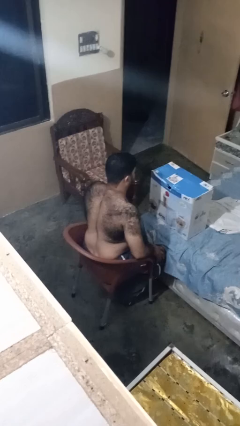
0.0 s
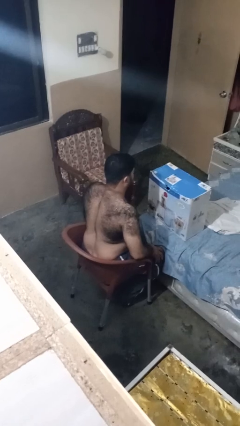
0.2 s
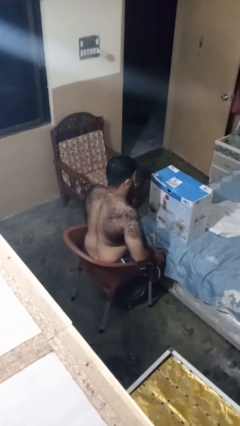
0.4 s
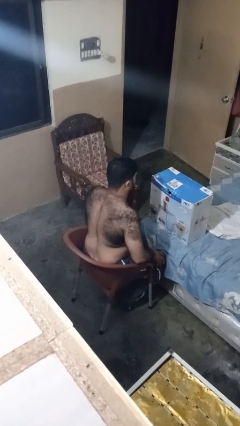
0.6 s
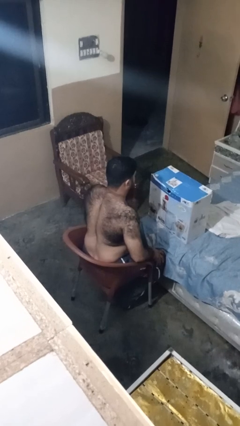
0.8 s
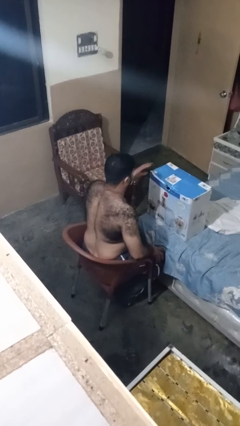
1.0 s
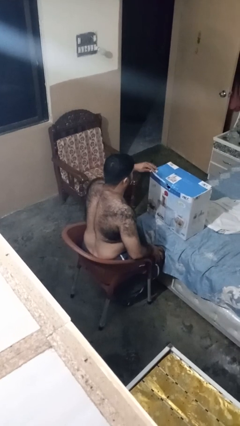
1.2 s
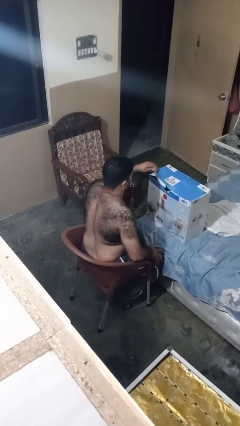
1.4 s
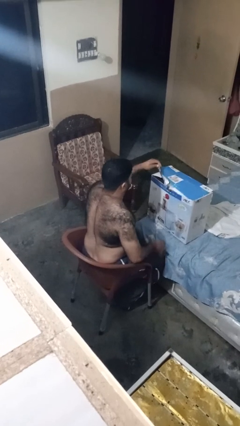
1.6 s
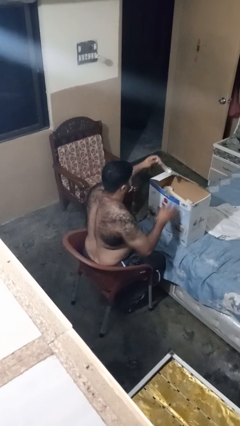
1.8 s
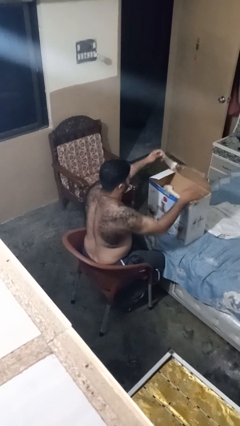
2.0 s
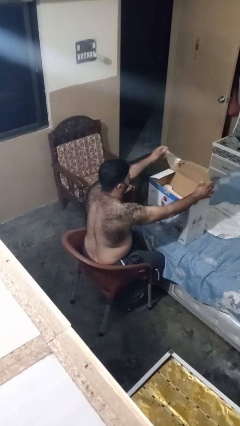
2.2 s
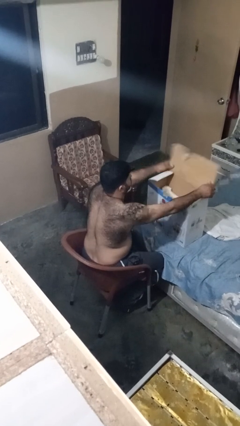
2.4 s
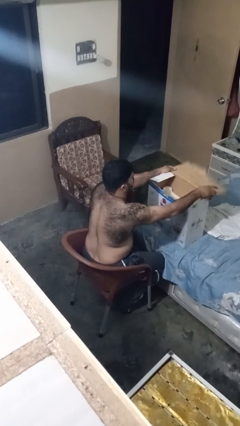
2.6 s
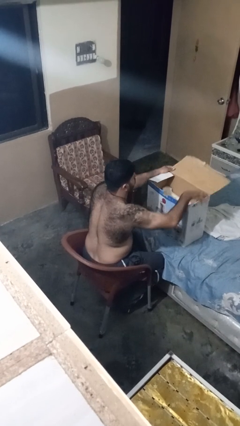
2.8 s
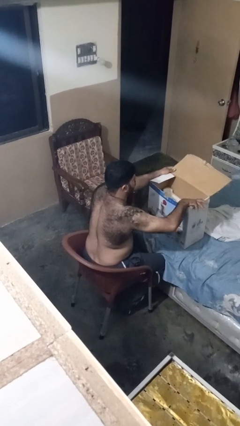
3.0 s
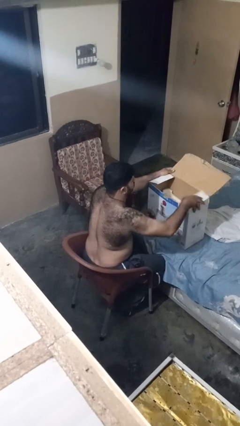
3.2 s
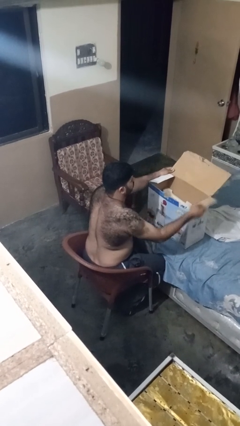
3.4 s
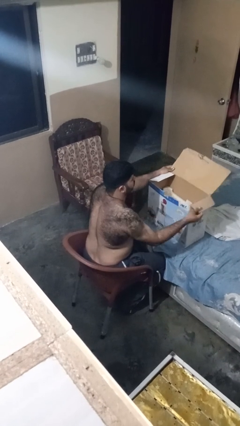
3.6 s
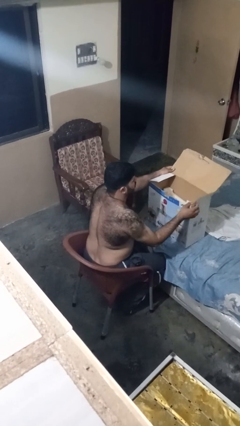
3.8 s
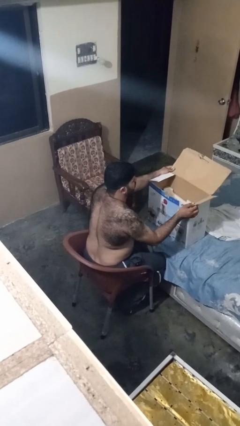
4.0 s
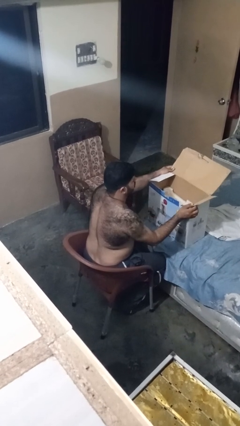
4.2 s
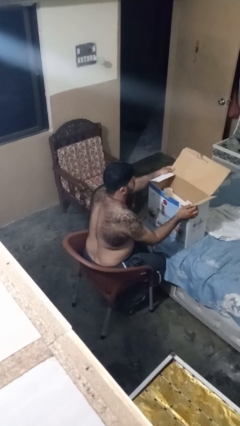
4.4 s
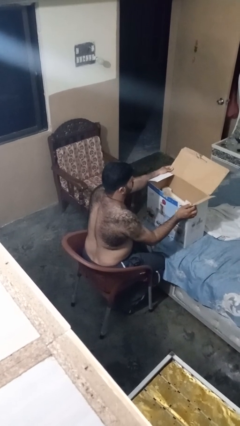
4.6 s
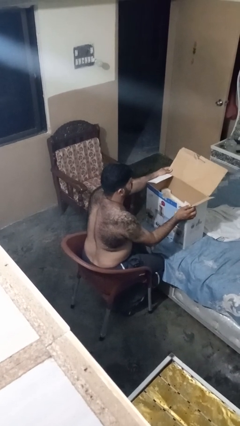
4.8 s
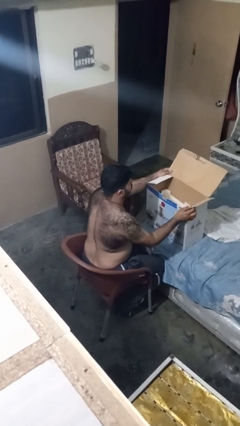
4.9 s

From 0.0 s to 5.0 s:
person opens box

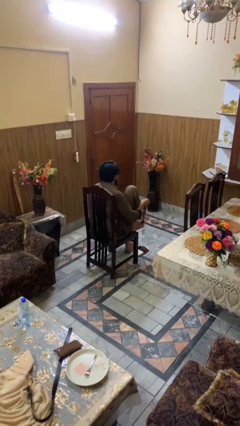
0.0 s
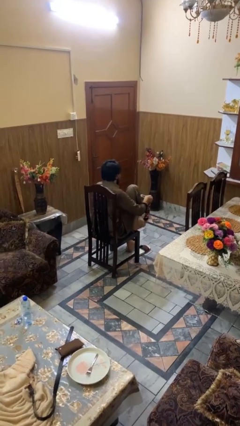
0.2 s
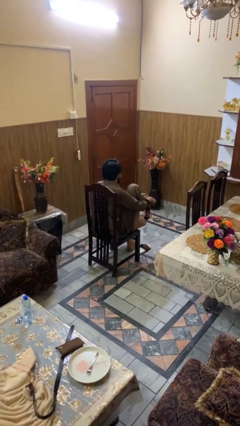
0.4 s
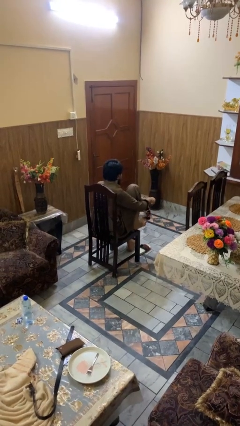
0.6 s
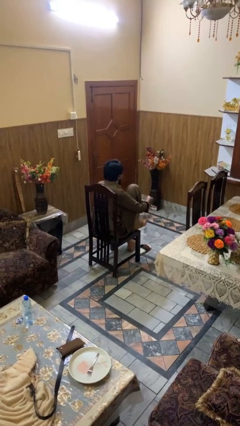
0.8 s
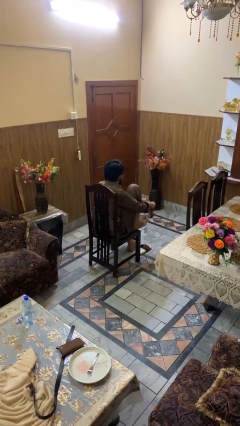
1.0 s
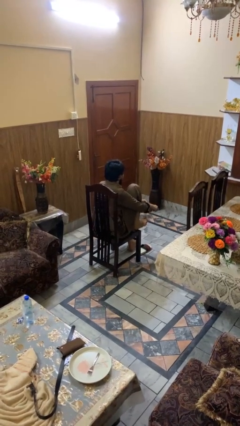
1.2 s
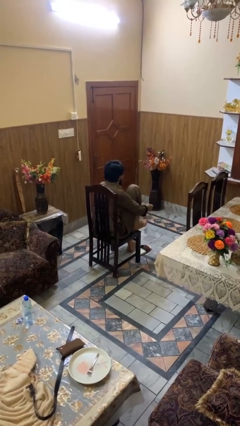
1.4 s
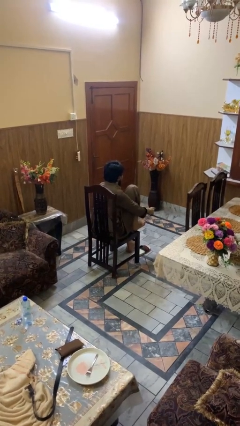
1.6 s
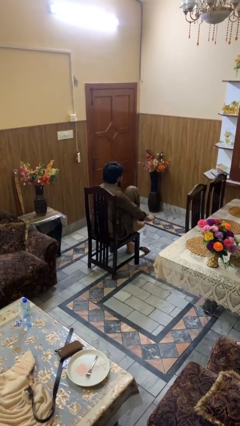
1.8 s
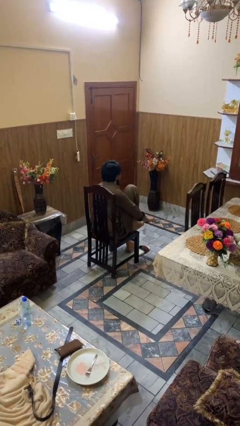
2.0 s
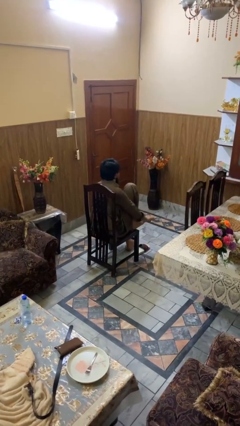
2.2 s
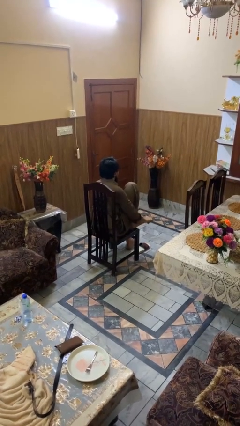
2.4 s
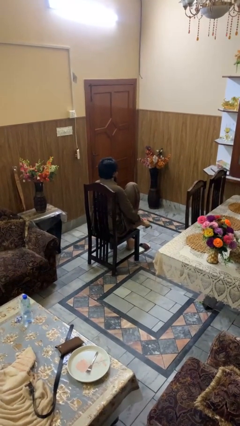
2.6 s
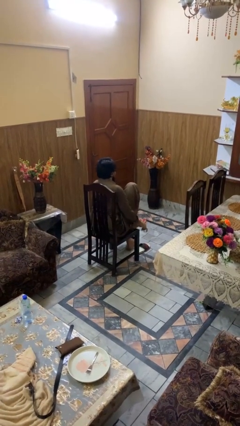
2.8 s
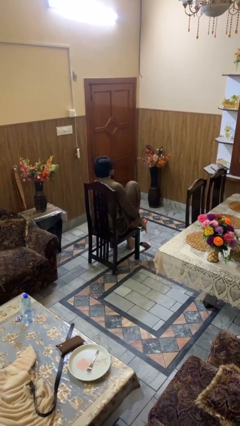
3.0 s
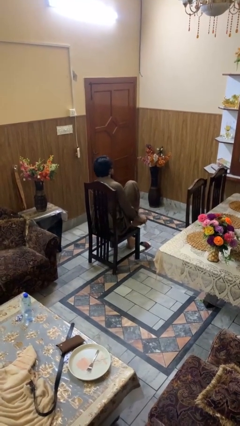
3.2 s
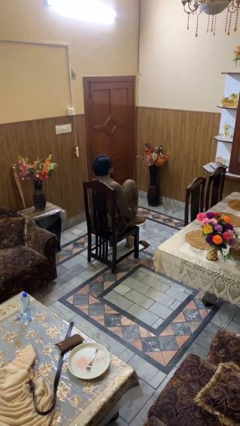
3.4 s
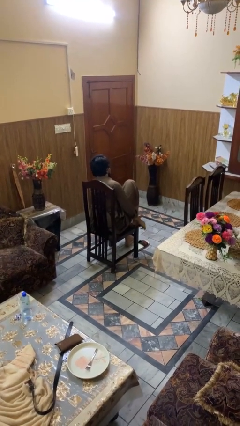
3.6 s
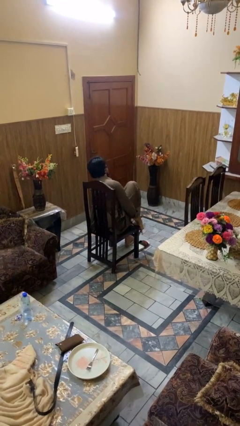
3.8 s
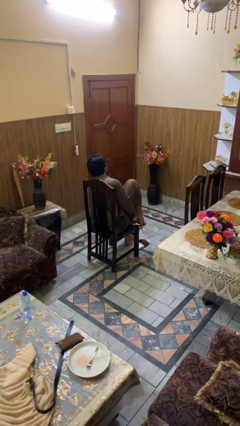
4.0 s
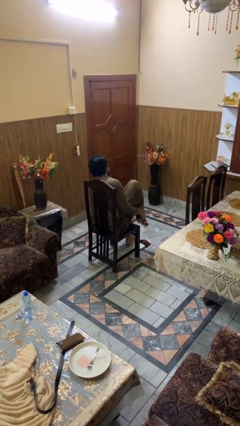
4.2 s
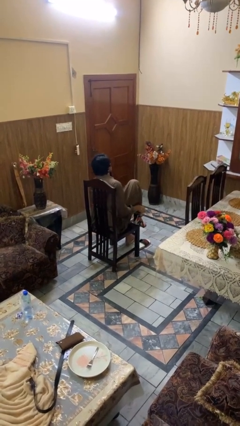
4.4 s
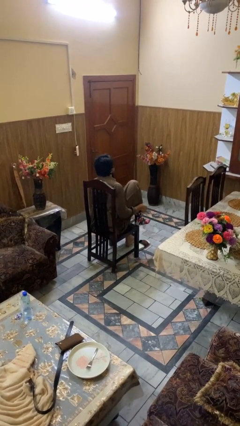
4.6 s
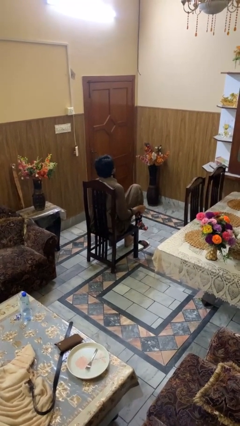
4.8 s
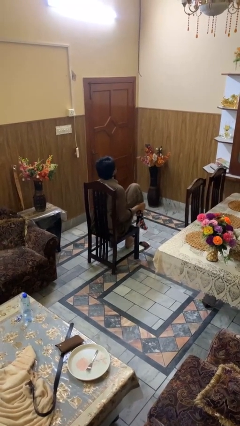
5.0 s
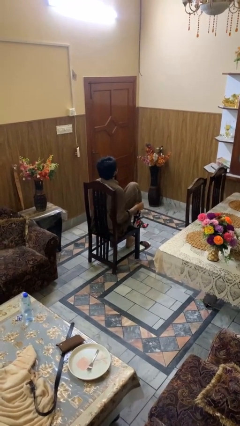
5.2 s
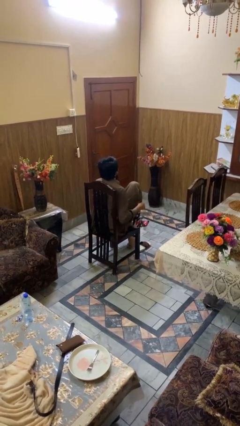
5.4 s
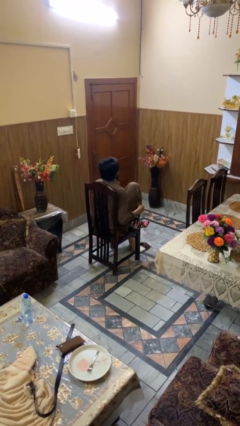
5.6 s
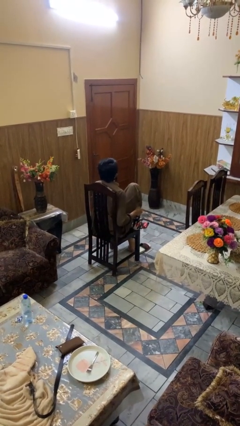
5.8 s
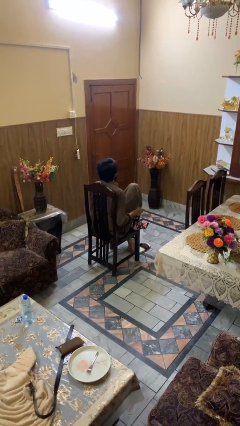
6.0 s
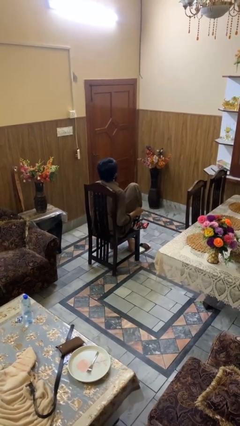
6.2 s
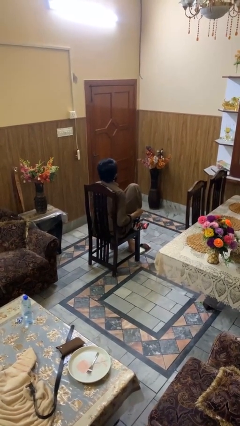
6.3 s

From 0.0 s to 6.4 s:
person puts on socks

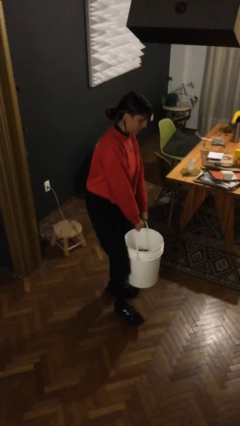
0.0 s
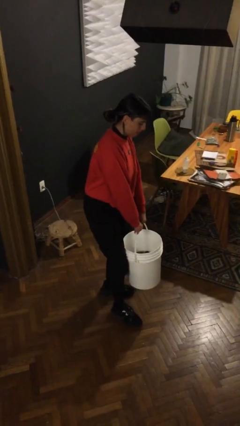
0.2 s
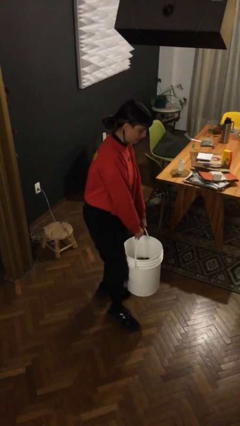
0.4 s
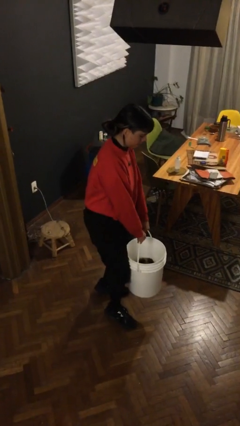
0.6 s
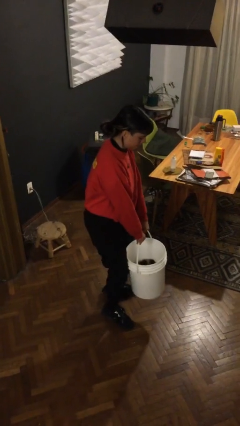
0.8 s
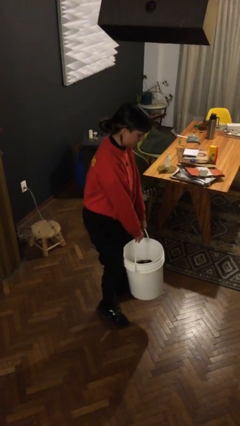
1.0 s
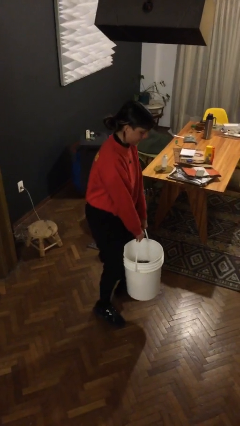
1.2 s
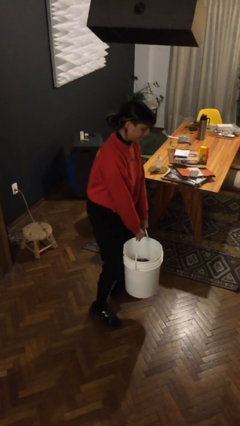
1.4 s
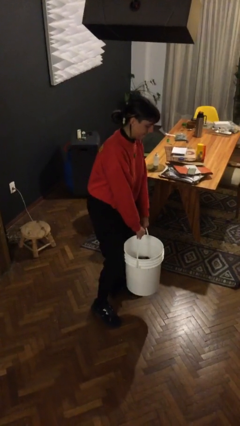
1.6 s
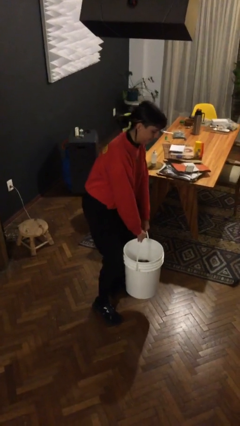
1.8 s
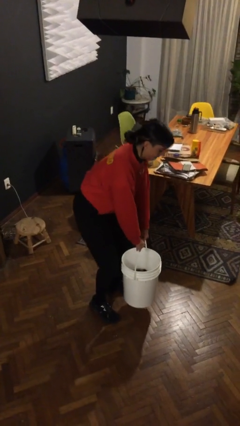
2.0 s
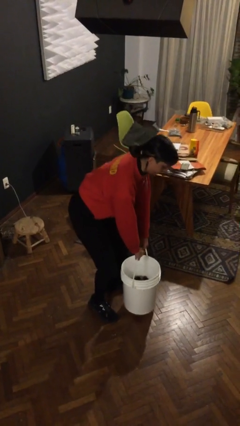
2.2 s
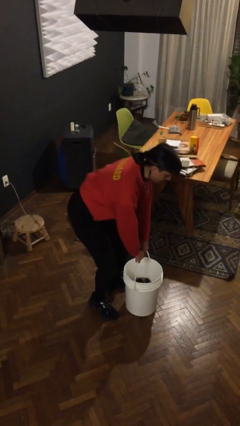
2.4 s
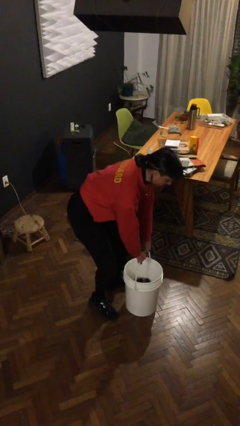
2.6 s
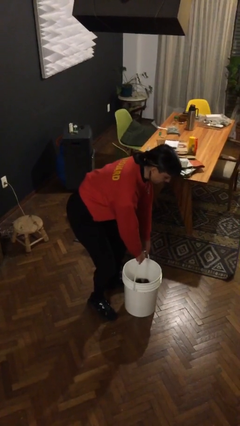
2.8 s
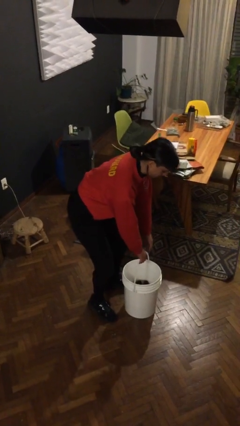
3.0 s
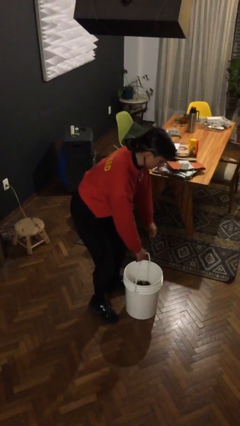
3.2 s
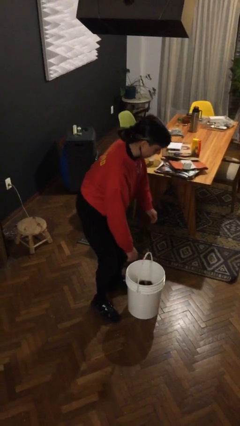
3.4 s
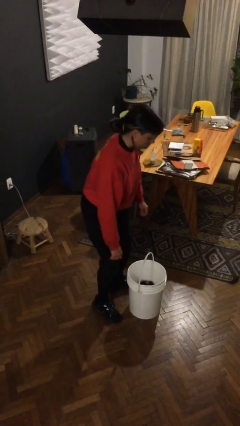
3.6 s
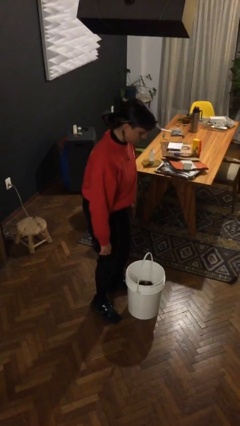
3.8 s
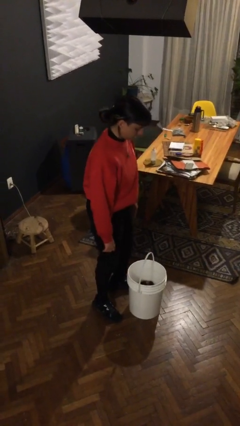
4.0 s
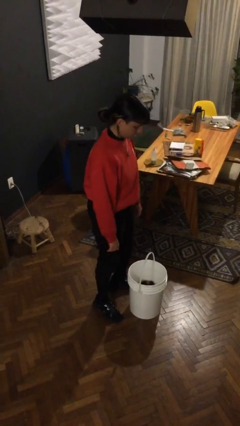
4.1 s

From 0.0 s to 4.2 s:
person puts down object on floor

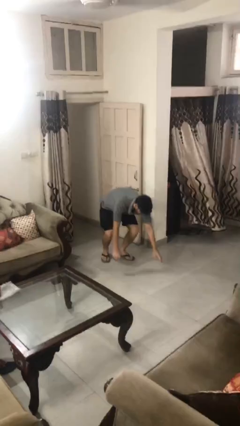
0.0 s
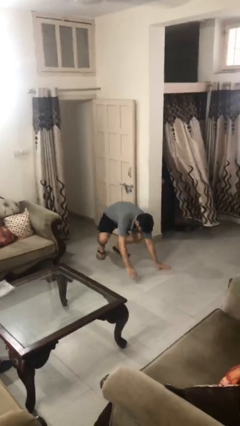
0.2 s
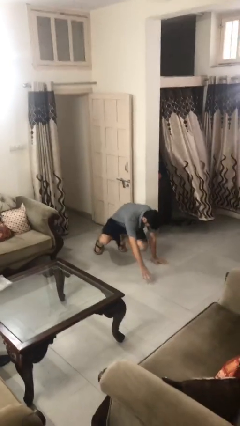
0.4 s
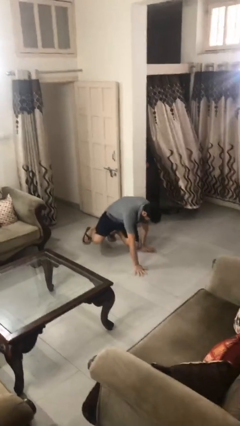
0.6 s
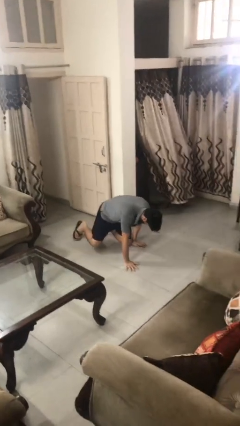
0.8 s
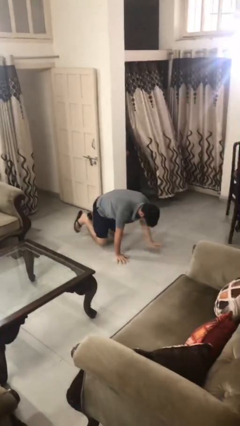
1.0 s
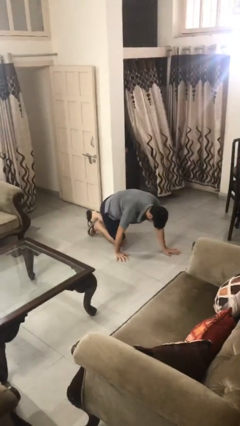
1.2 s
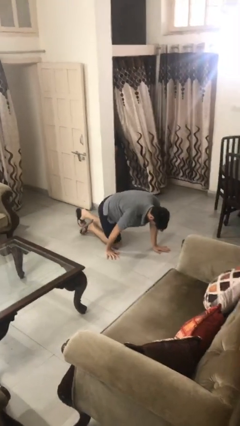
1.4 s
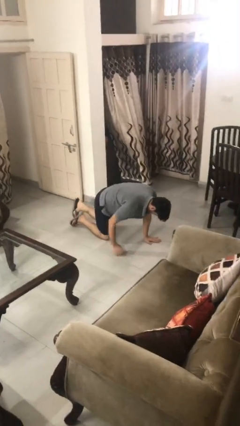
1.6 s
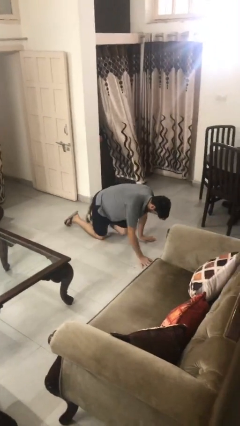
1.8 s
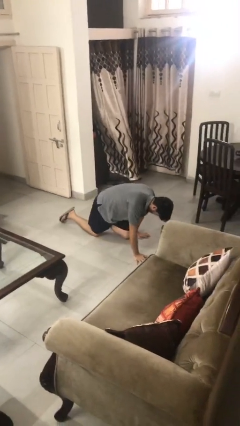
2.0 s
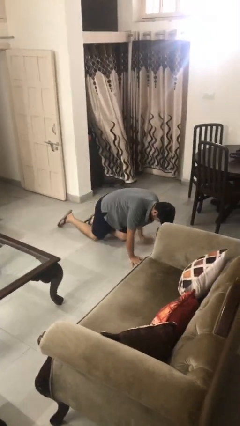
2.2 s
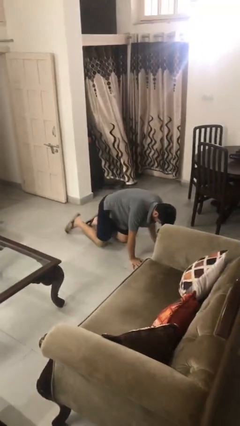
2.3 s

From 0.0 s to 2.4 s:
person crawls
